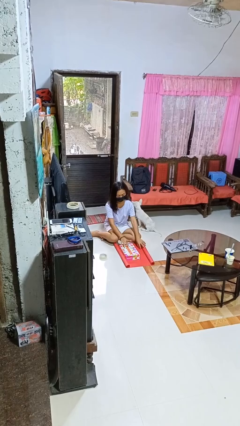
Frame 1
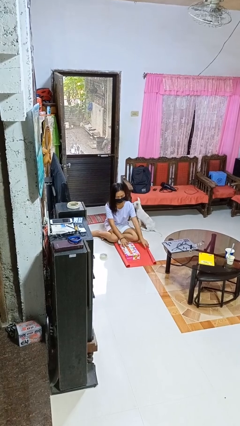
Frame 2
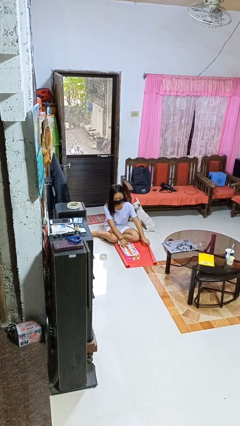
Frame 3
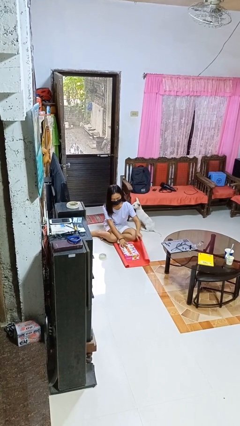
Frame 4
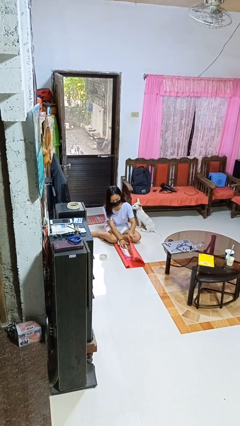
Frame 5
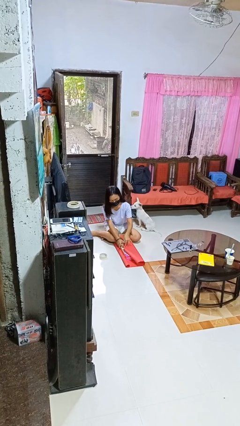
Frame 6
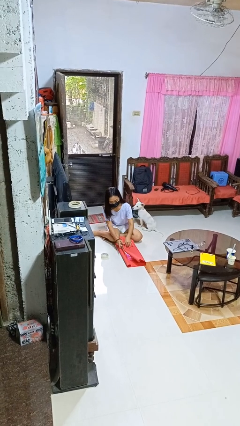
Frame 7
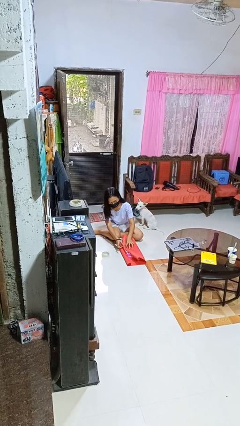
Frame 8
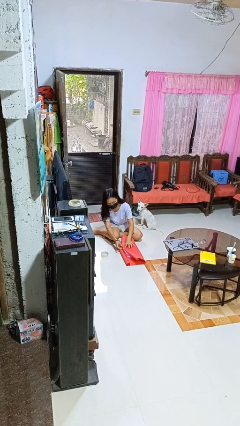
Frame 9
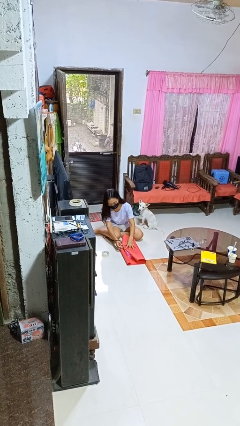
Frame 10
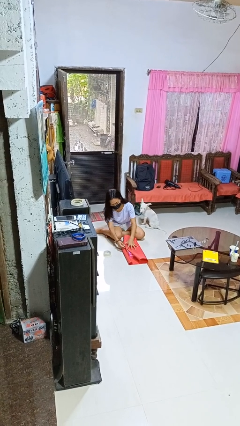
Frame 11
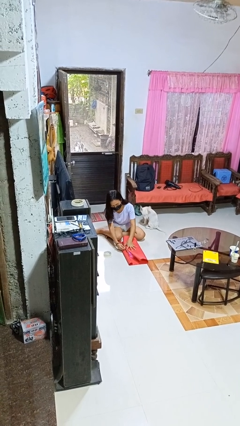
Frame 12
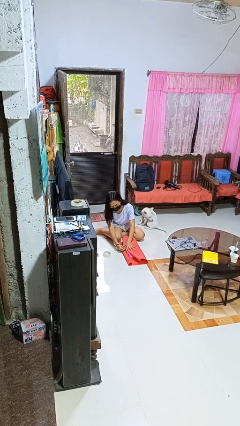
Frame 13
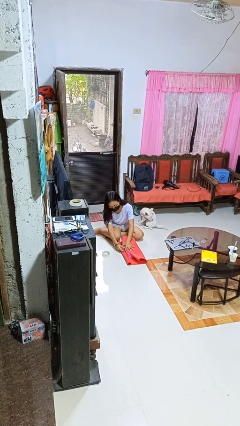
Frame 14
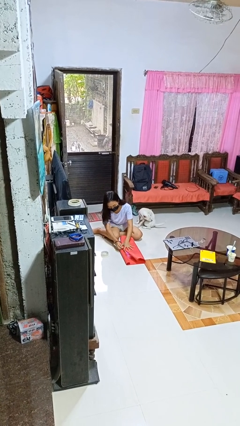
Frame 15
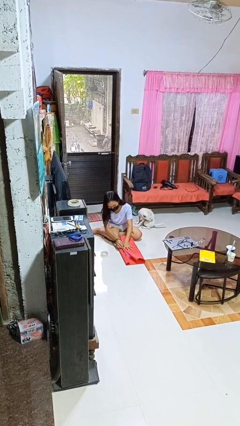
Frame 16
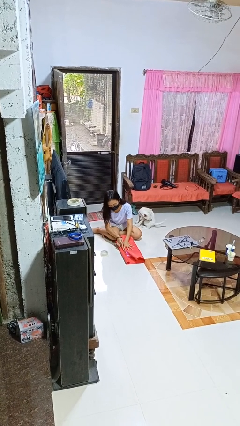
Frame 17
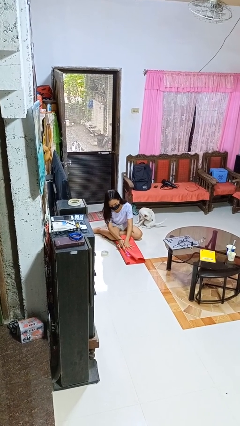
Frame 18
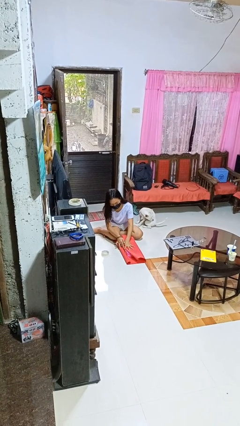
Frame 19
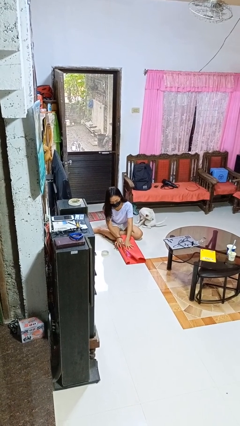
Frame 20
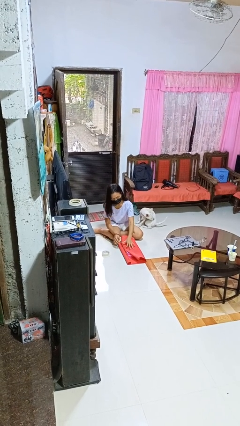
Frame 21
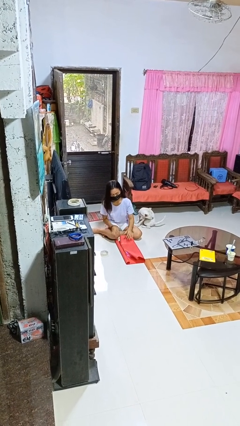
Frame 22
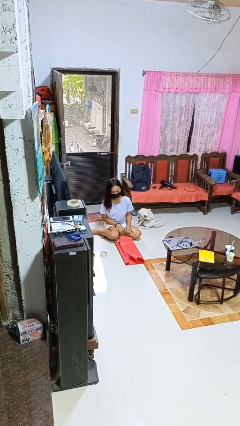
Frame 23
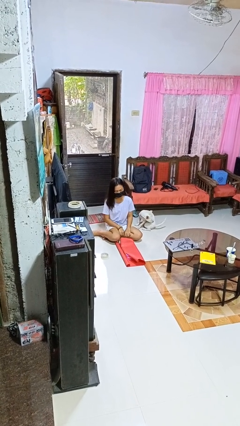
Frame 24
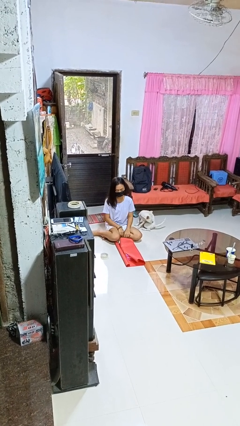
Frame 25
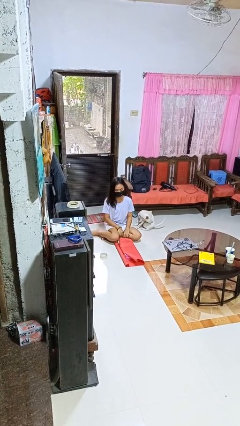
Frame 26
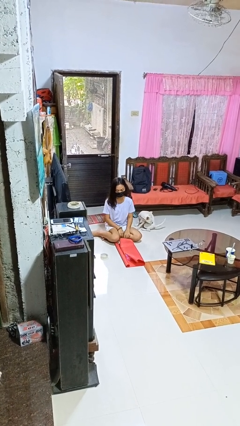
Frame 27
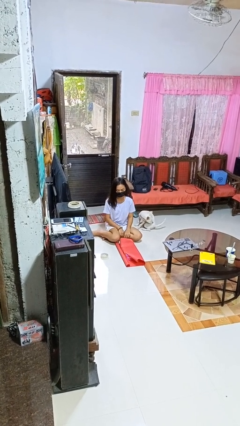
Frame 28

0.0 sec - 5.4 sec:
person wraps box

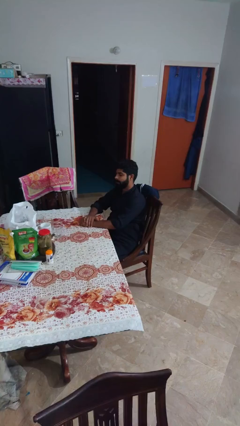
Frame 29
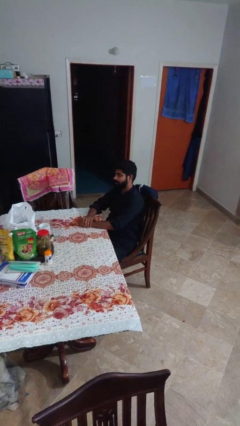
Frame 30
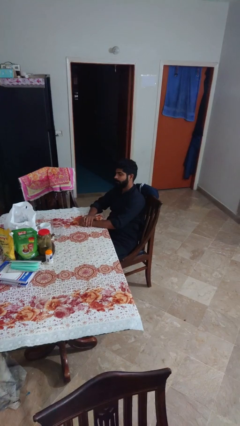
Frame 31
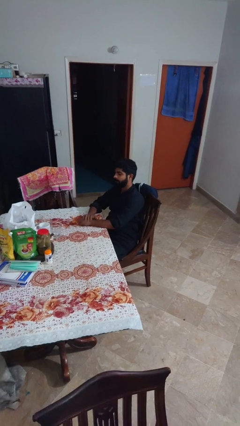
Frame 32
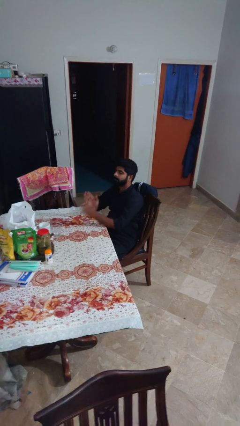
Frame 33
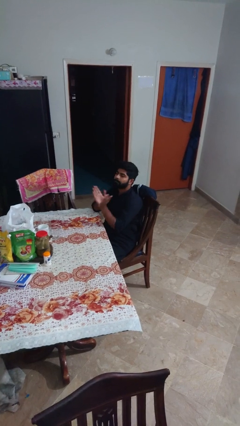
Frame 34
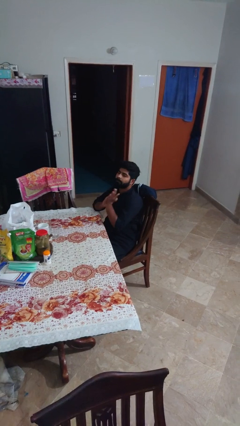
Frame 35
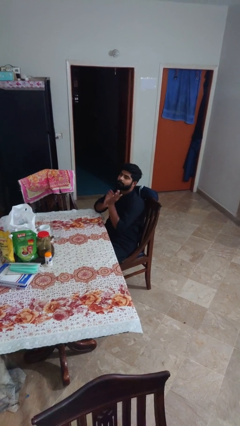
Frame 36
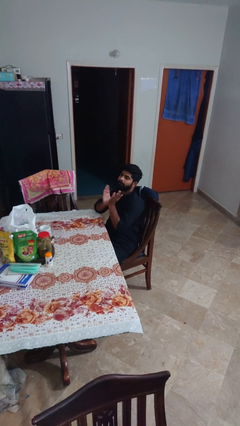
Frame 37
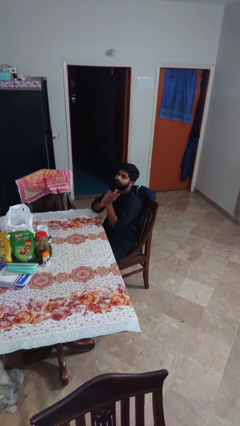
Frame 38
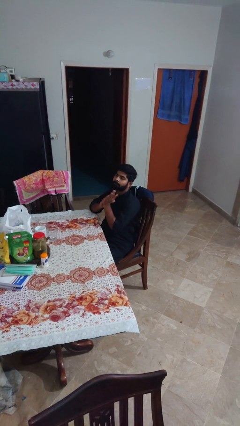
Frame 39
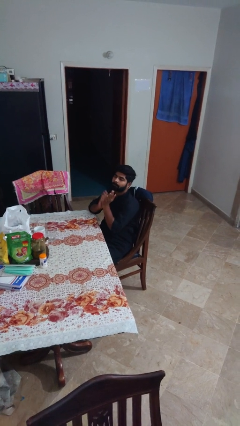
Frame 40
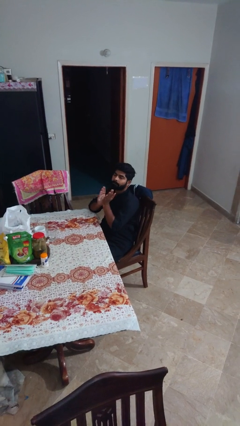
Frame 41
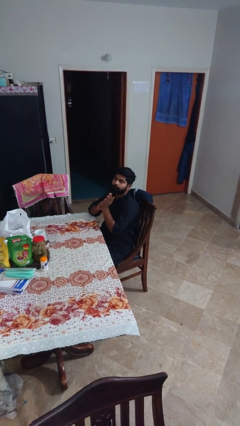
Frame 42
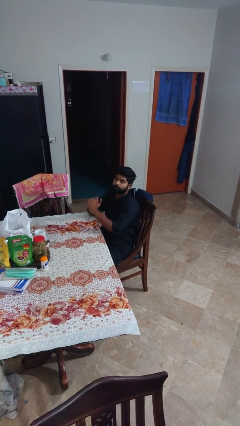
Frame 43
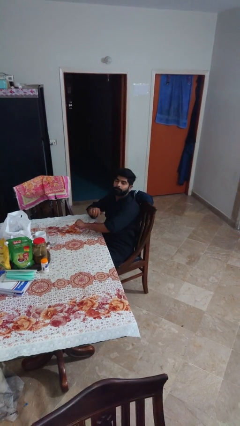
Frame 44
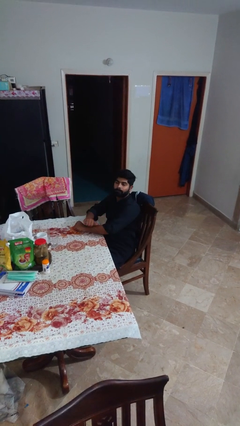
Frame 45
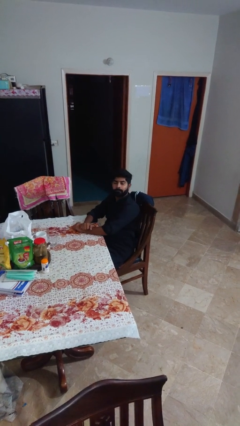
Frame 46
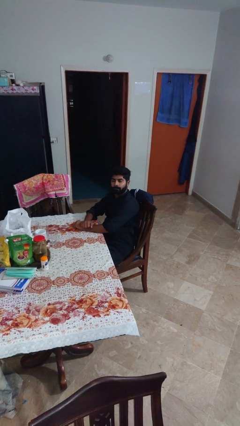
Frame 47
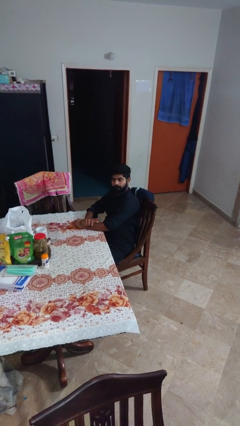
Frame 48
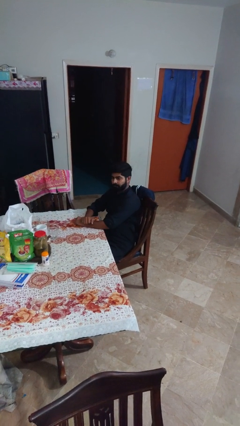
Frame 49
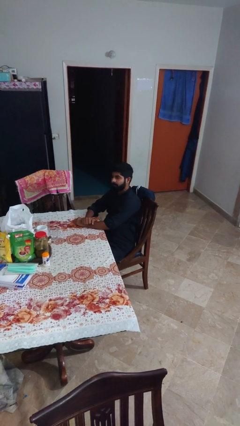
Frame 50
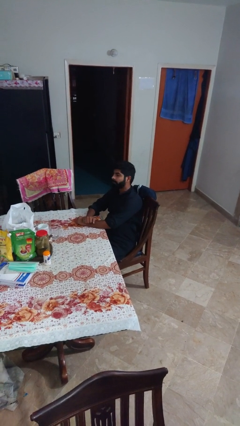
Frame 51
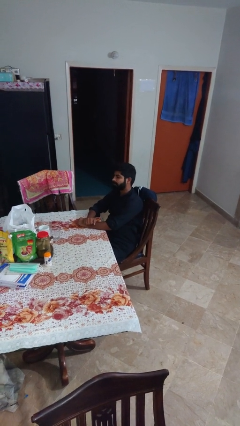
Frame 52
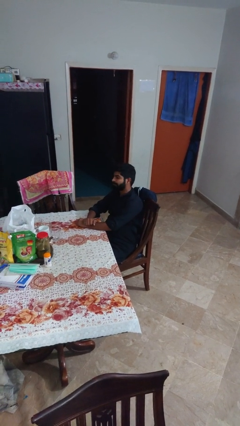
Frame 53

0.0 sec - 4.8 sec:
person claps hands

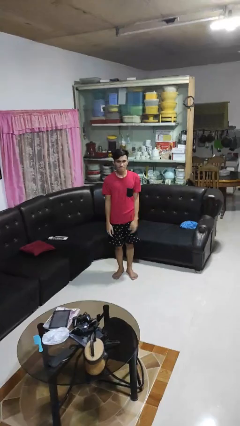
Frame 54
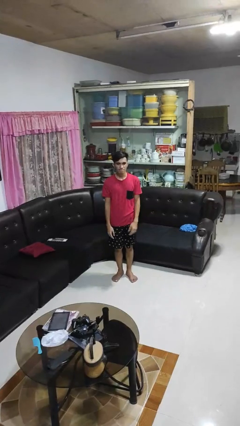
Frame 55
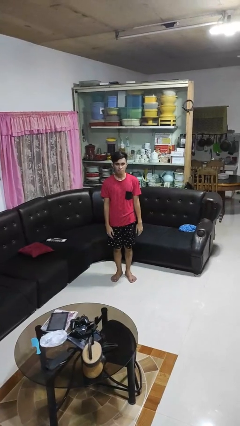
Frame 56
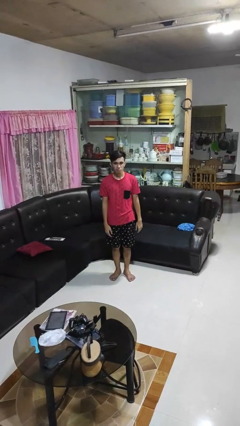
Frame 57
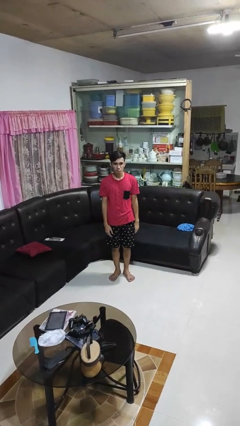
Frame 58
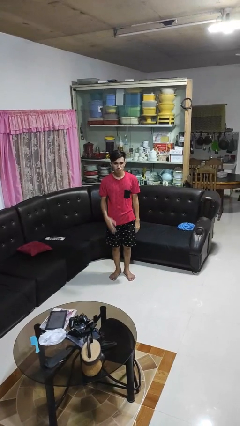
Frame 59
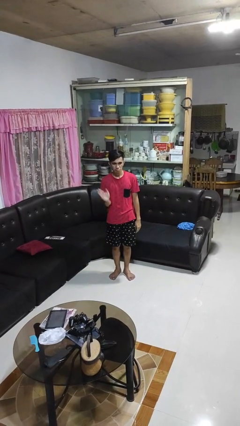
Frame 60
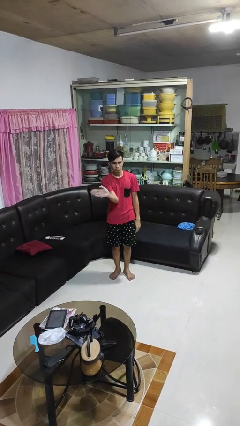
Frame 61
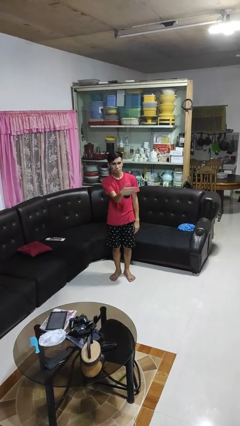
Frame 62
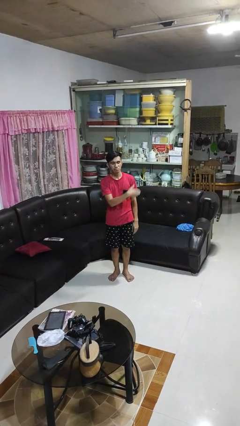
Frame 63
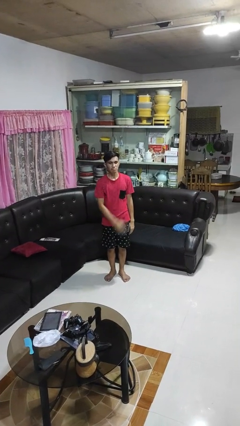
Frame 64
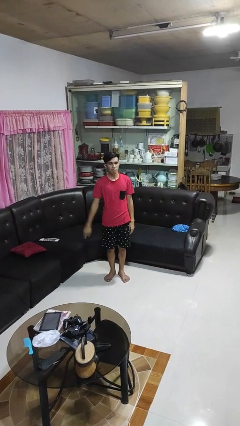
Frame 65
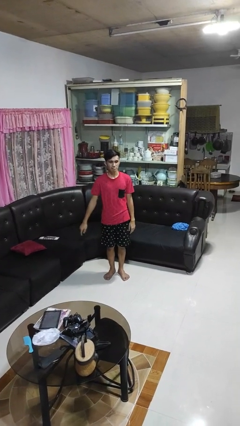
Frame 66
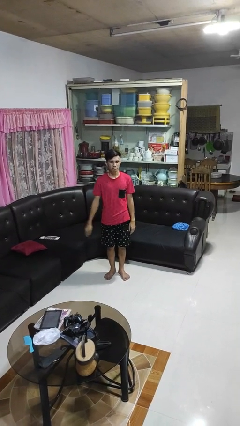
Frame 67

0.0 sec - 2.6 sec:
person gestures swipe left

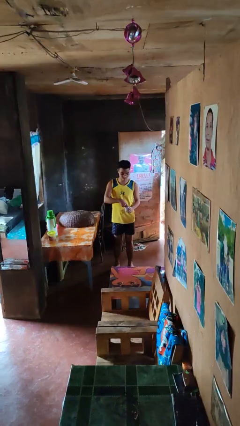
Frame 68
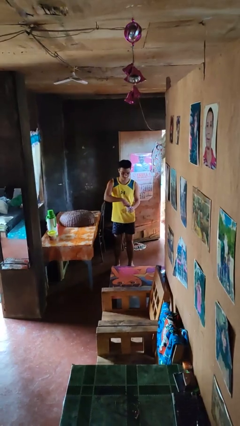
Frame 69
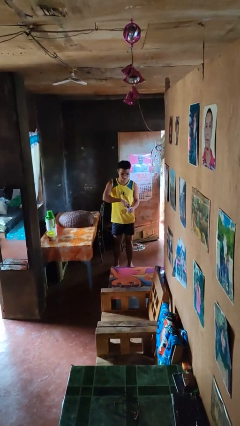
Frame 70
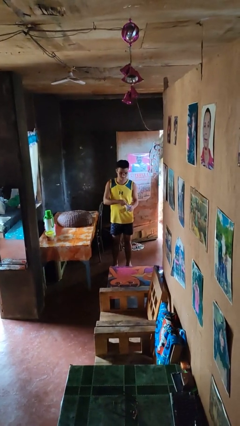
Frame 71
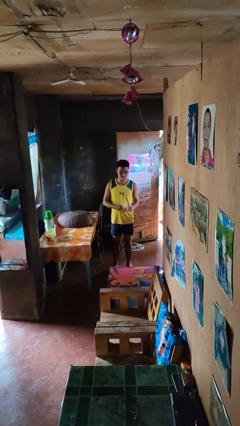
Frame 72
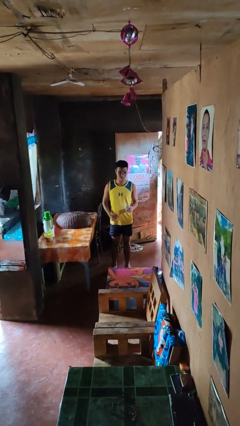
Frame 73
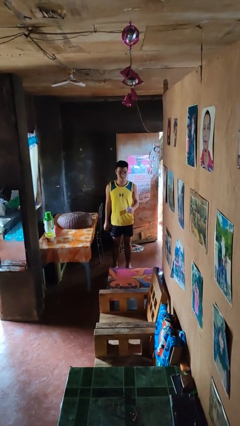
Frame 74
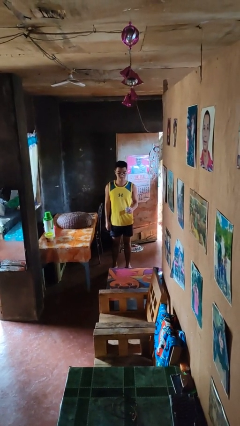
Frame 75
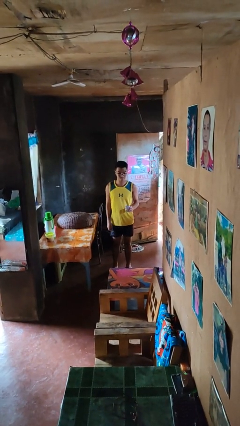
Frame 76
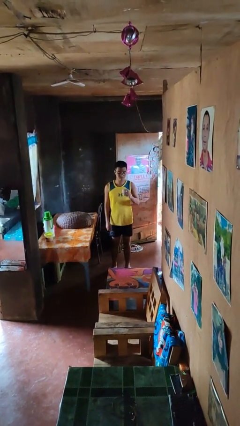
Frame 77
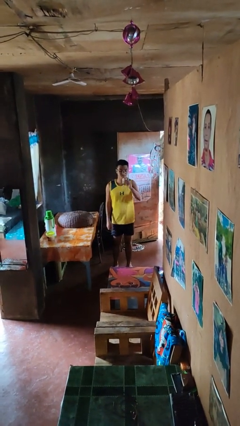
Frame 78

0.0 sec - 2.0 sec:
person opens beverage can

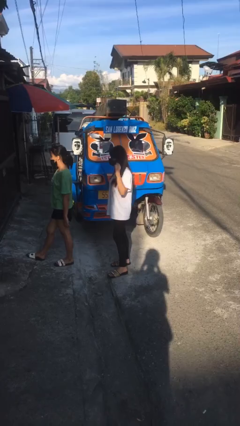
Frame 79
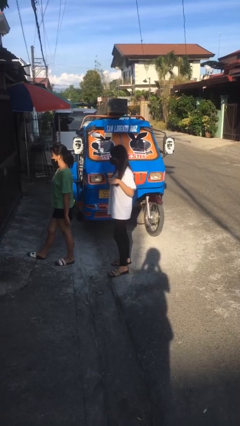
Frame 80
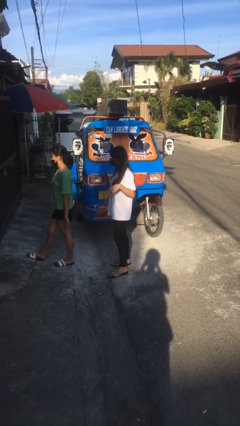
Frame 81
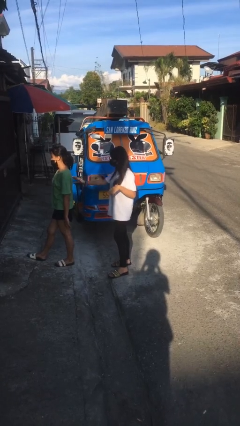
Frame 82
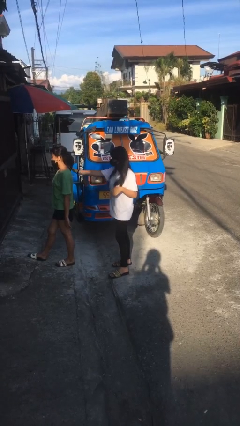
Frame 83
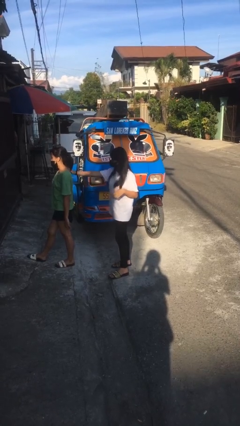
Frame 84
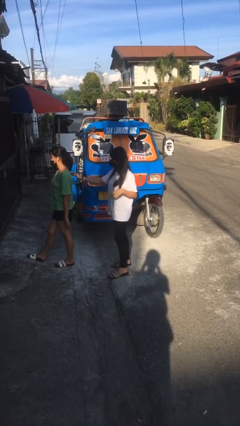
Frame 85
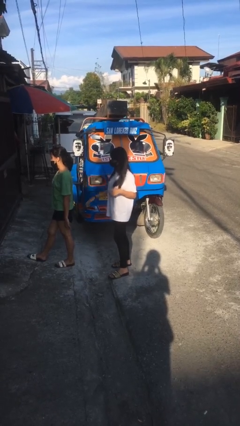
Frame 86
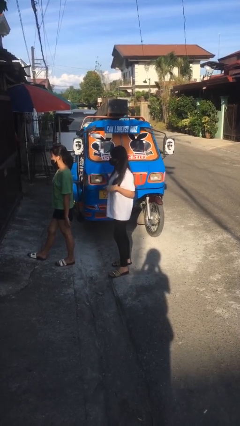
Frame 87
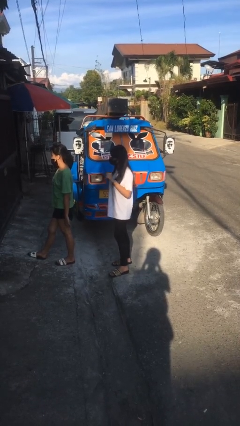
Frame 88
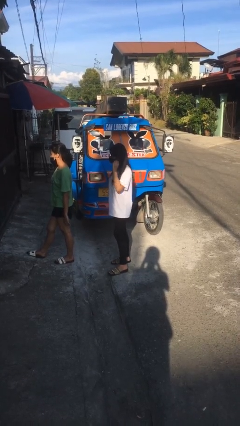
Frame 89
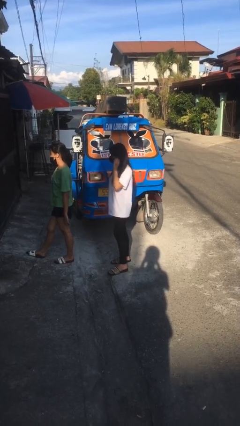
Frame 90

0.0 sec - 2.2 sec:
person touches back of person

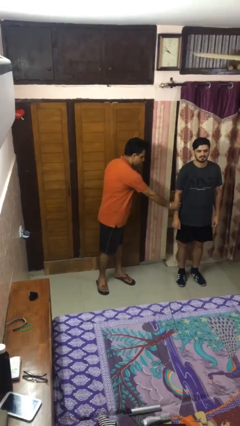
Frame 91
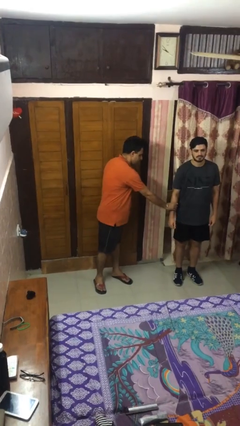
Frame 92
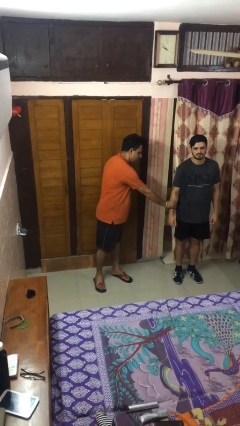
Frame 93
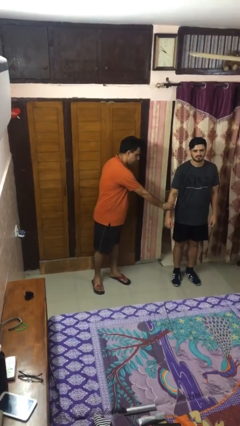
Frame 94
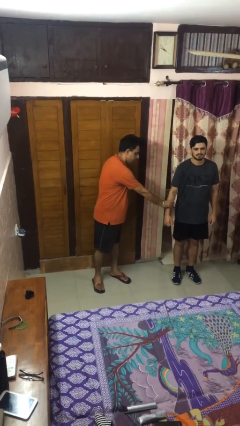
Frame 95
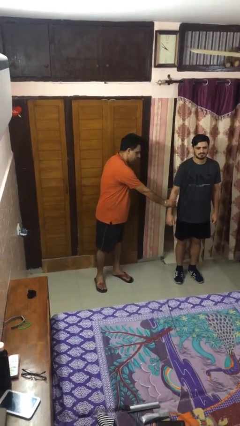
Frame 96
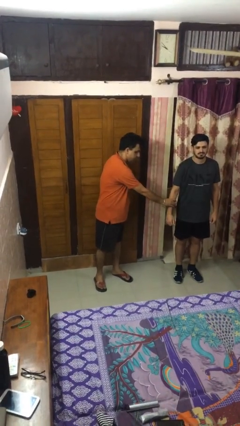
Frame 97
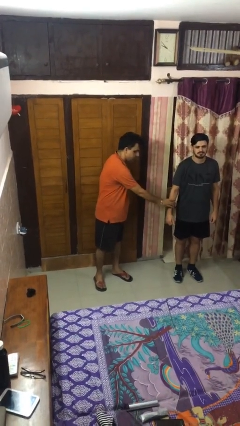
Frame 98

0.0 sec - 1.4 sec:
person grabs person by forearm
